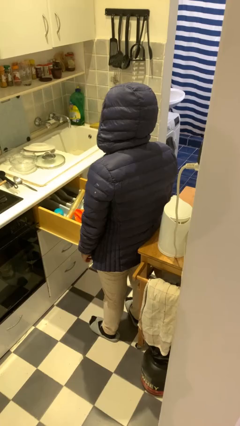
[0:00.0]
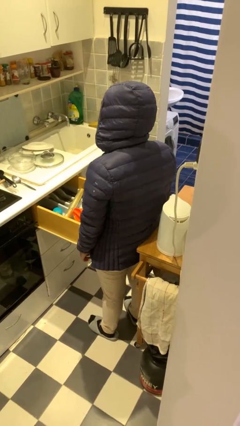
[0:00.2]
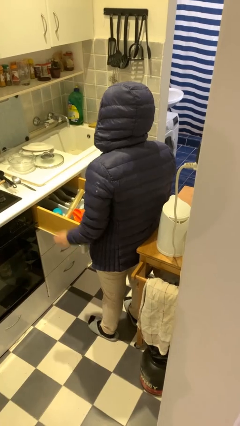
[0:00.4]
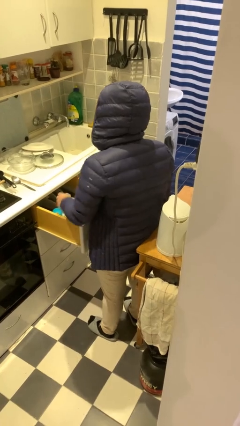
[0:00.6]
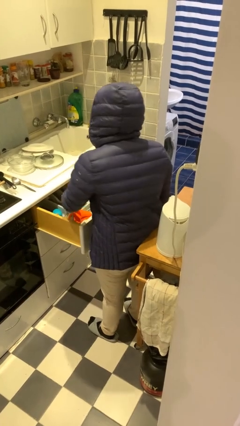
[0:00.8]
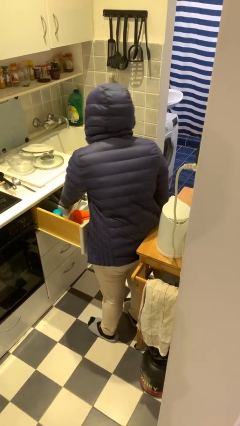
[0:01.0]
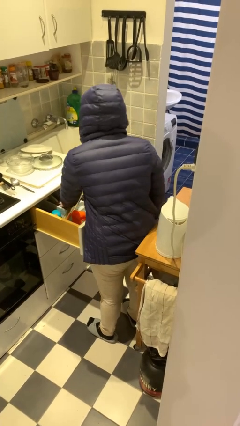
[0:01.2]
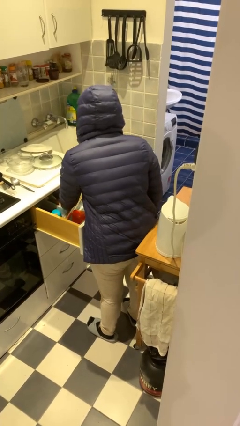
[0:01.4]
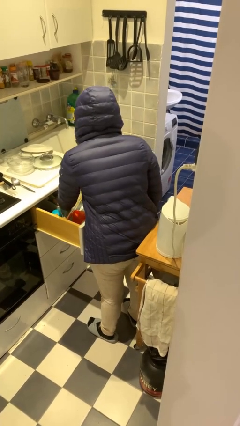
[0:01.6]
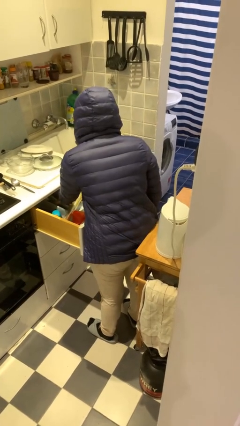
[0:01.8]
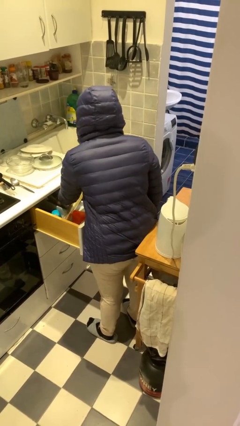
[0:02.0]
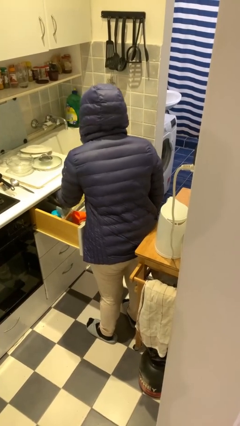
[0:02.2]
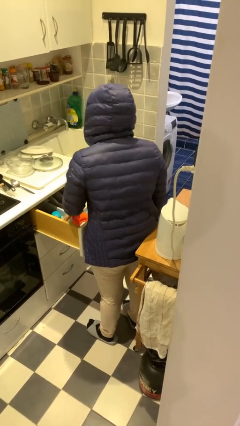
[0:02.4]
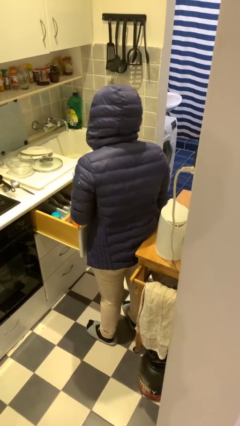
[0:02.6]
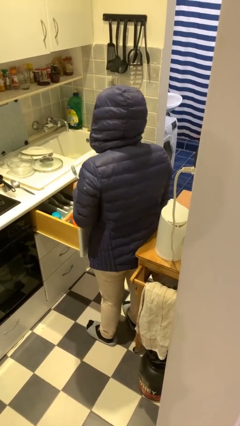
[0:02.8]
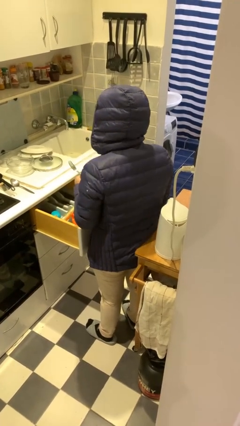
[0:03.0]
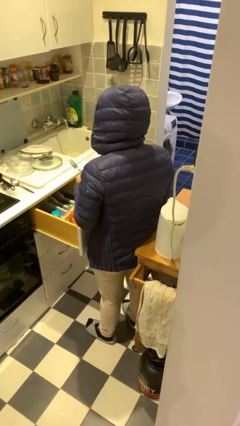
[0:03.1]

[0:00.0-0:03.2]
person takes object from kitchen drawer

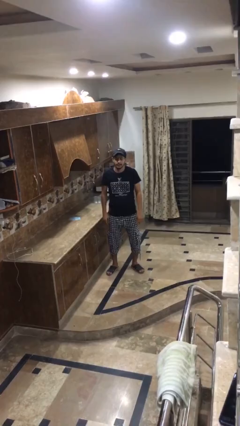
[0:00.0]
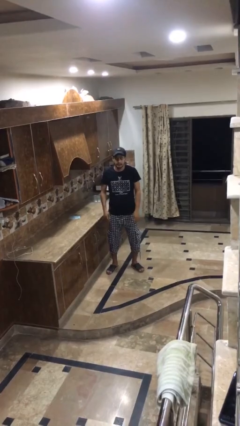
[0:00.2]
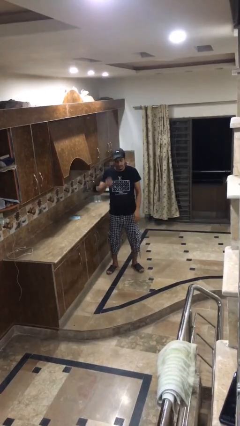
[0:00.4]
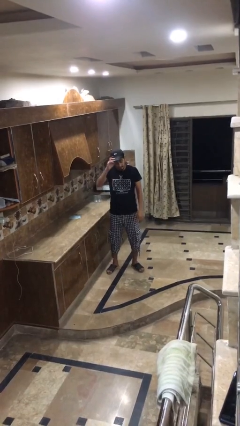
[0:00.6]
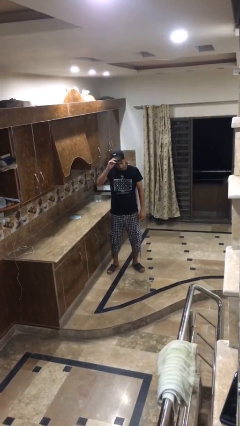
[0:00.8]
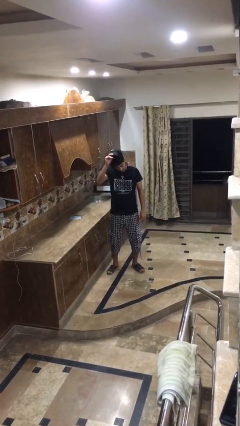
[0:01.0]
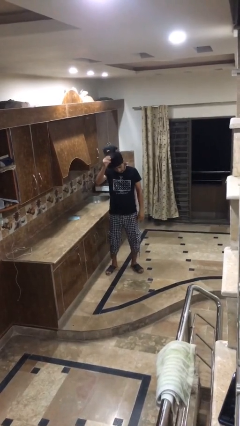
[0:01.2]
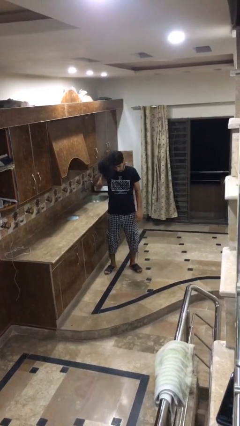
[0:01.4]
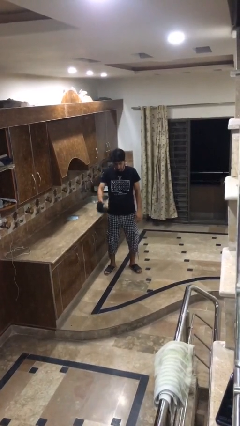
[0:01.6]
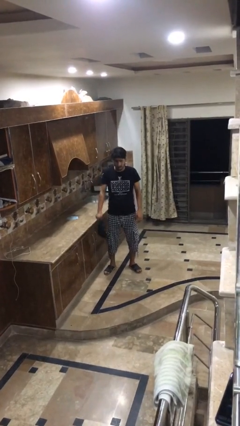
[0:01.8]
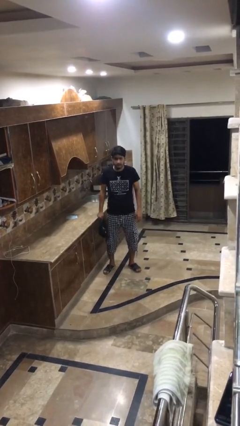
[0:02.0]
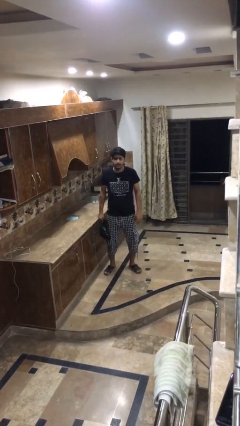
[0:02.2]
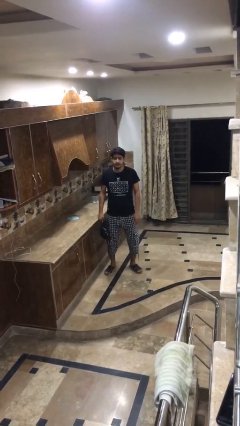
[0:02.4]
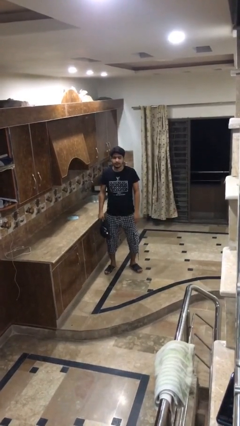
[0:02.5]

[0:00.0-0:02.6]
person takes off hat

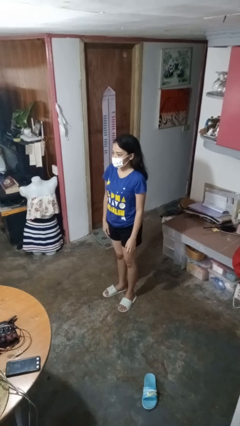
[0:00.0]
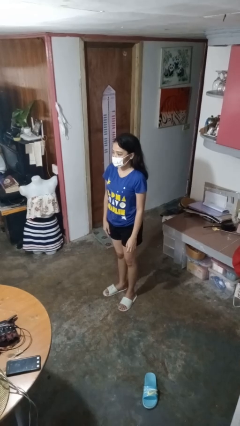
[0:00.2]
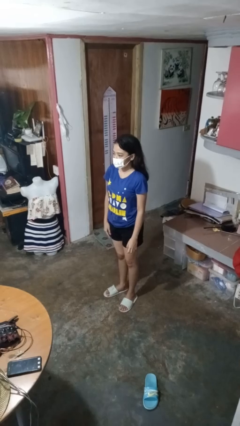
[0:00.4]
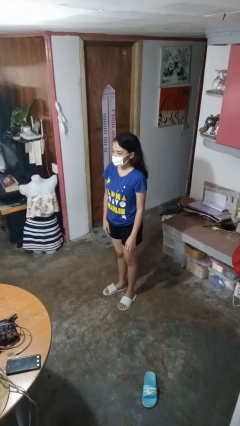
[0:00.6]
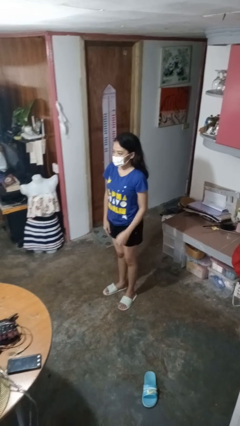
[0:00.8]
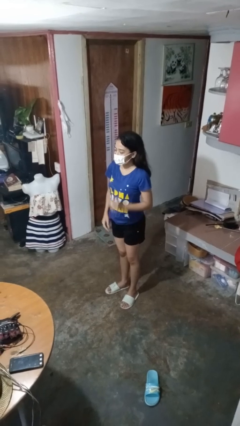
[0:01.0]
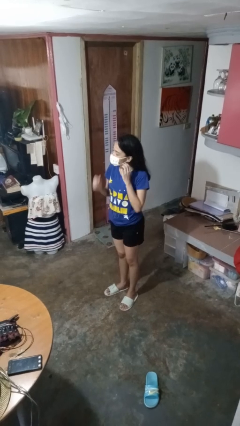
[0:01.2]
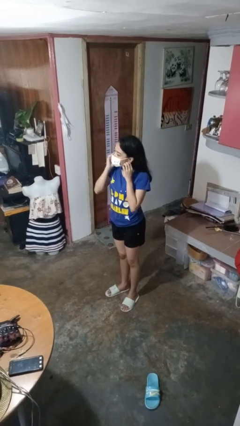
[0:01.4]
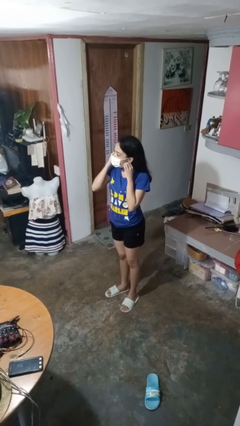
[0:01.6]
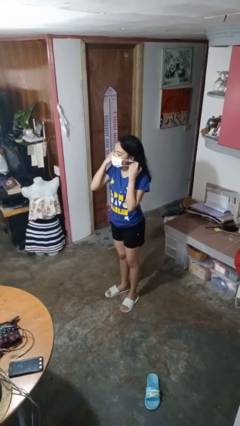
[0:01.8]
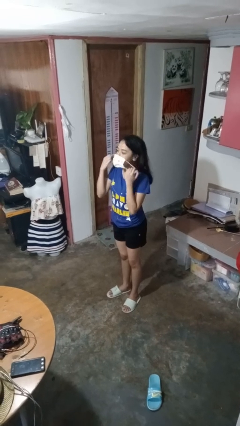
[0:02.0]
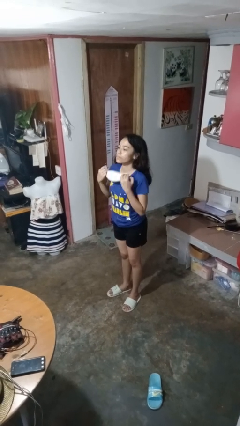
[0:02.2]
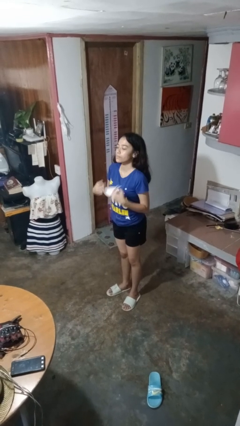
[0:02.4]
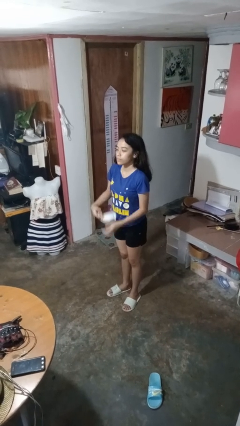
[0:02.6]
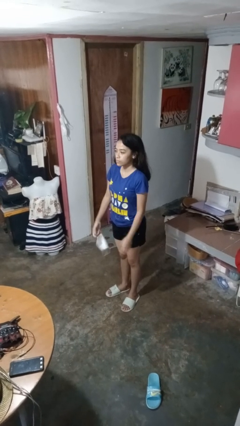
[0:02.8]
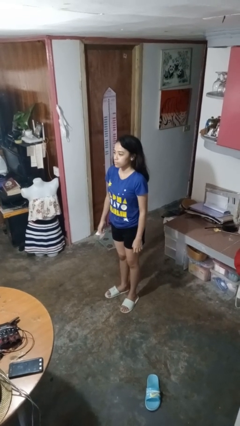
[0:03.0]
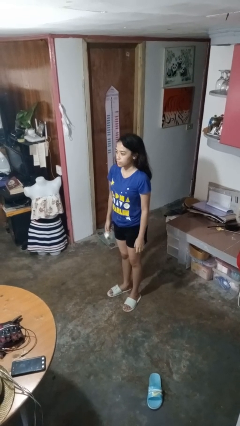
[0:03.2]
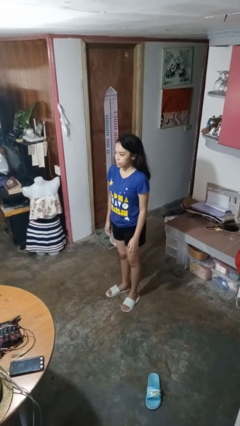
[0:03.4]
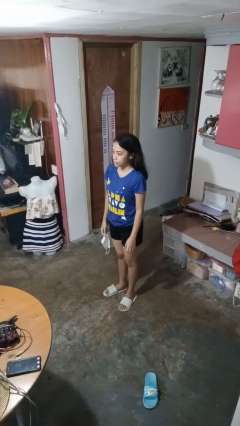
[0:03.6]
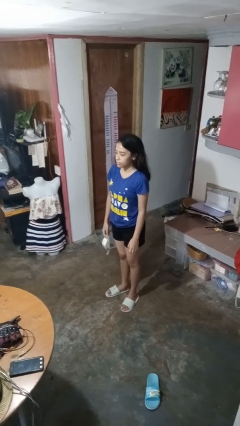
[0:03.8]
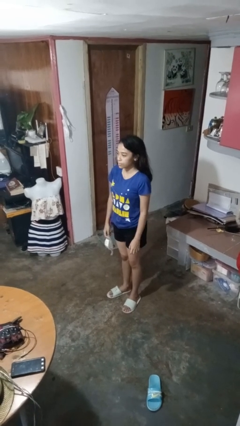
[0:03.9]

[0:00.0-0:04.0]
person takes off facemask

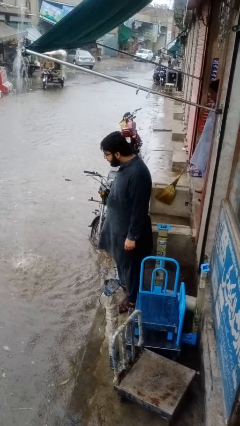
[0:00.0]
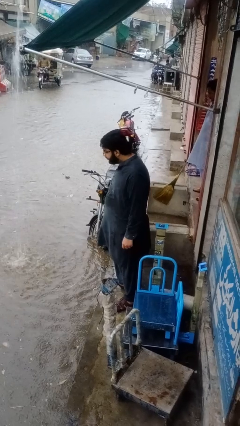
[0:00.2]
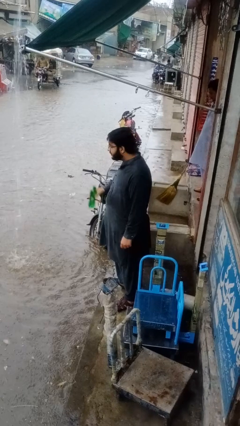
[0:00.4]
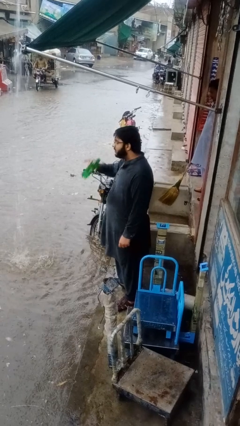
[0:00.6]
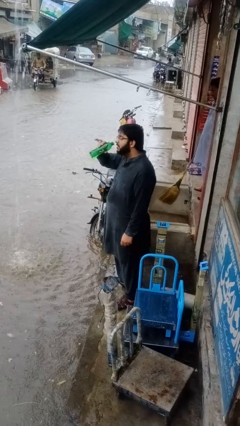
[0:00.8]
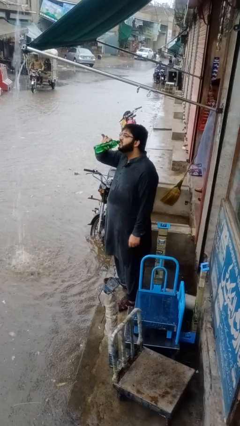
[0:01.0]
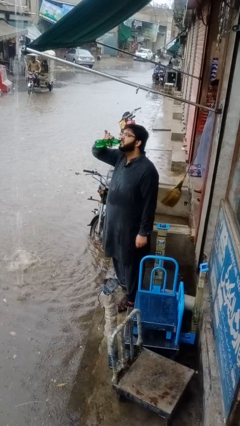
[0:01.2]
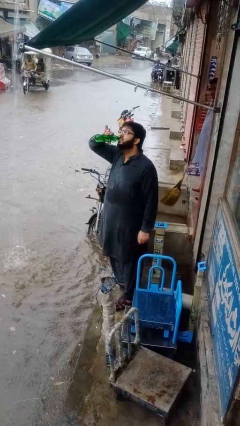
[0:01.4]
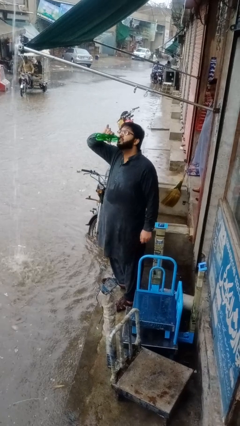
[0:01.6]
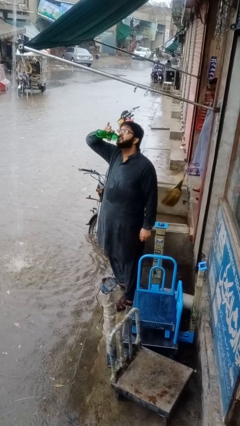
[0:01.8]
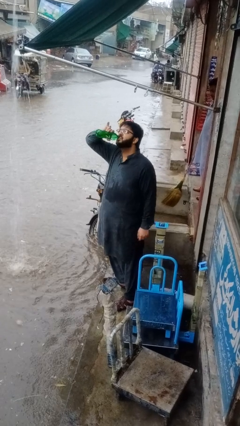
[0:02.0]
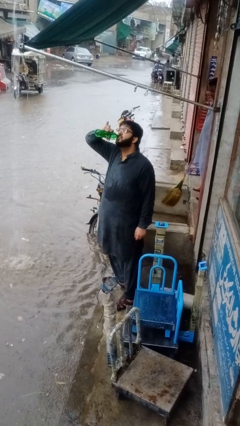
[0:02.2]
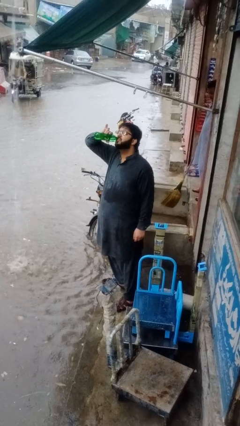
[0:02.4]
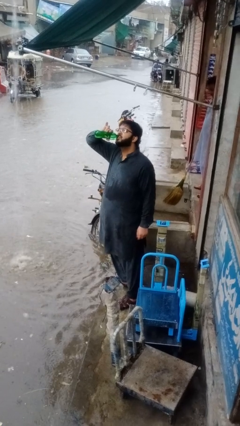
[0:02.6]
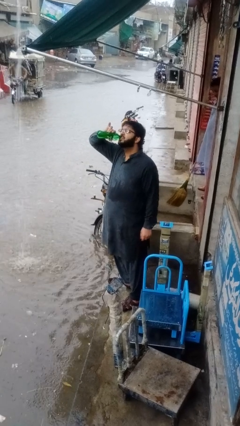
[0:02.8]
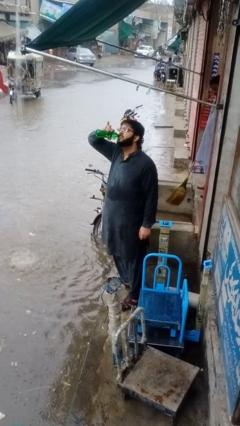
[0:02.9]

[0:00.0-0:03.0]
person drinks from bottle

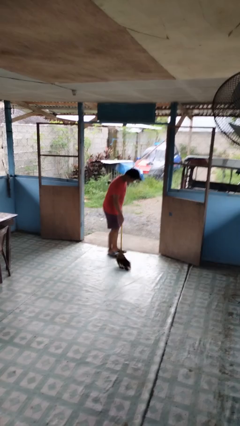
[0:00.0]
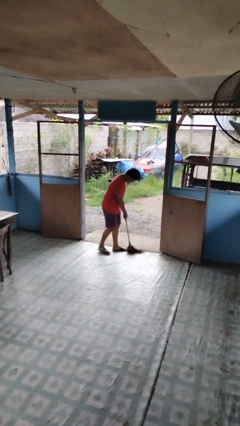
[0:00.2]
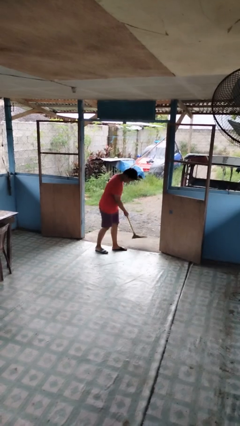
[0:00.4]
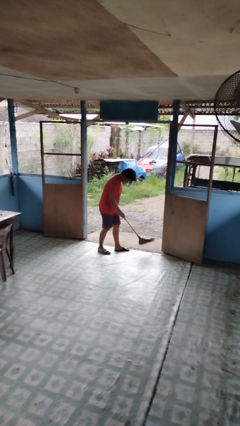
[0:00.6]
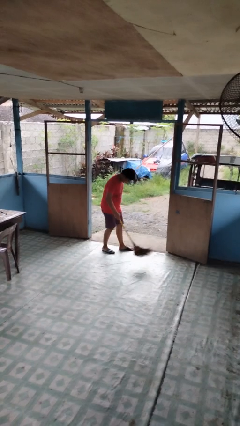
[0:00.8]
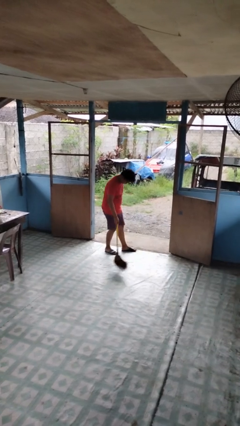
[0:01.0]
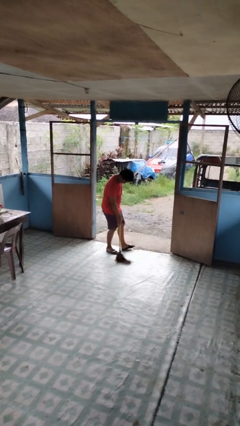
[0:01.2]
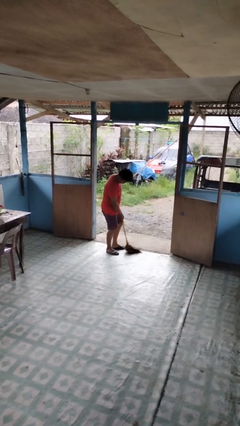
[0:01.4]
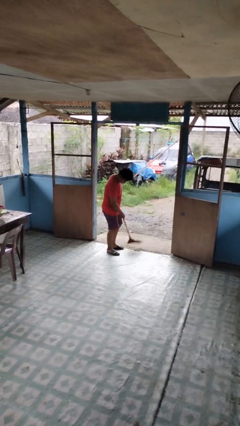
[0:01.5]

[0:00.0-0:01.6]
person sweeps floor

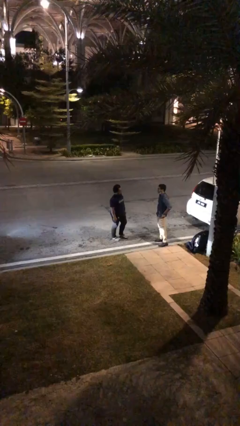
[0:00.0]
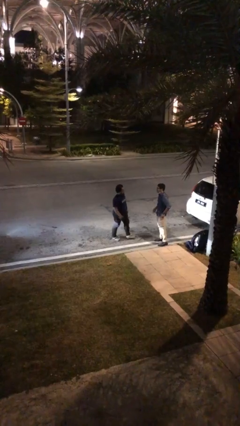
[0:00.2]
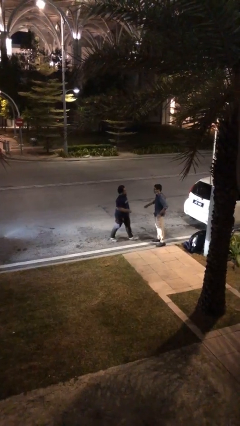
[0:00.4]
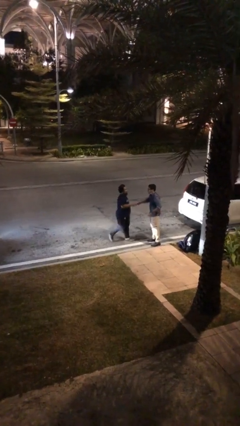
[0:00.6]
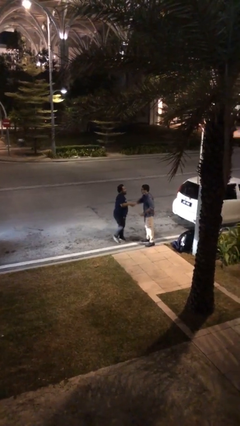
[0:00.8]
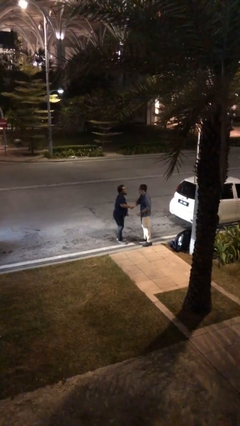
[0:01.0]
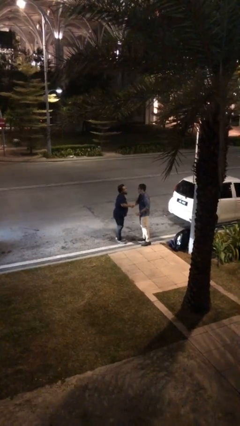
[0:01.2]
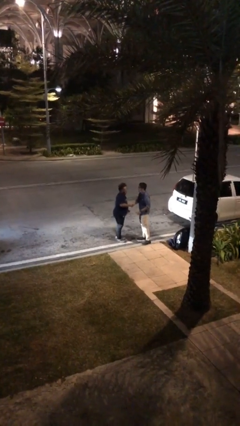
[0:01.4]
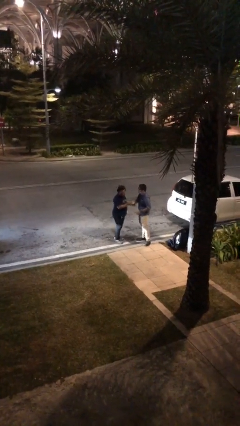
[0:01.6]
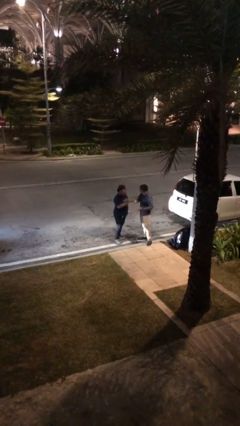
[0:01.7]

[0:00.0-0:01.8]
person shakes hand

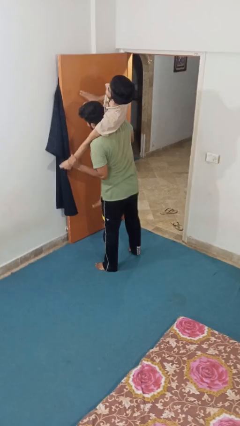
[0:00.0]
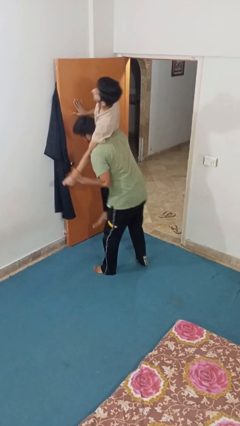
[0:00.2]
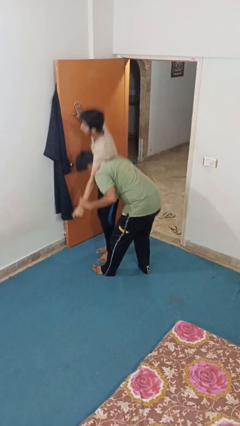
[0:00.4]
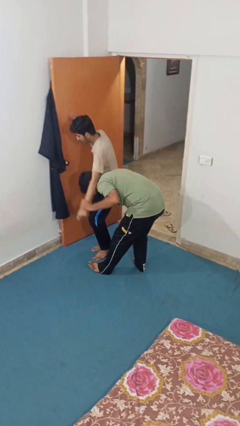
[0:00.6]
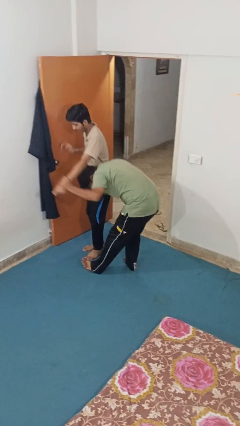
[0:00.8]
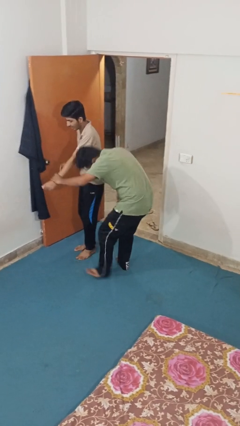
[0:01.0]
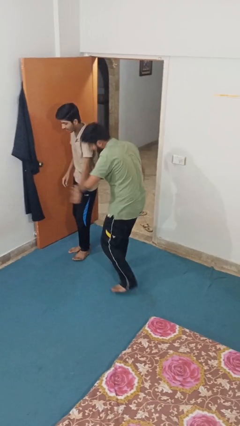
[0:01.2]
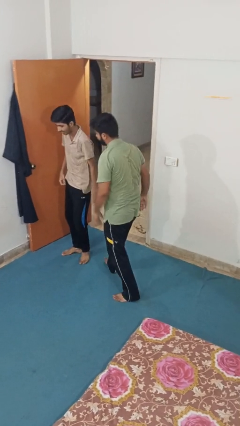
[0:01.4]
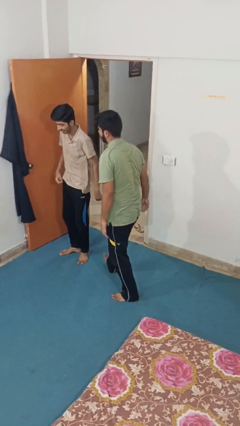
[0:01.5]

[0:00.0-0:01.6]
person puts down person
